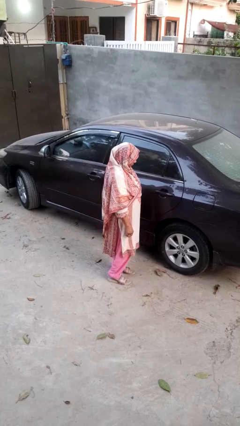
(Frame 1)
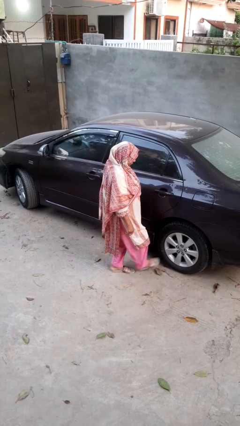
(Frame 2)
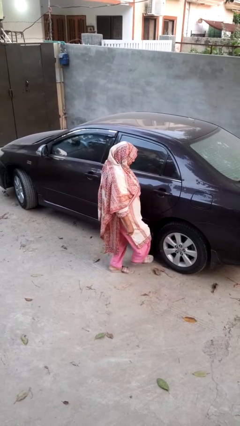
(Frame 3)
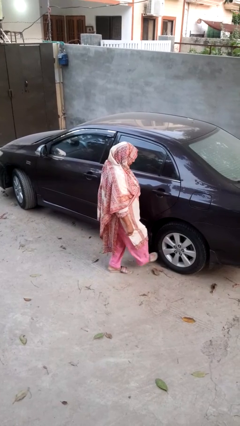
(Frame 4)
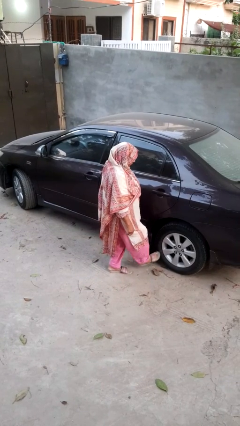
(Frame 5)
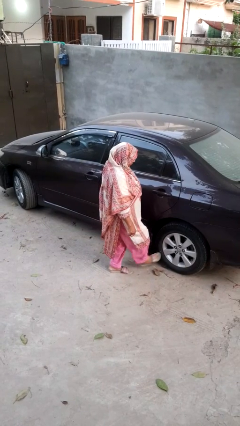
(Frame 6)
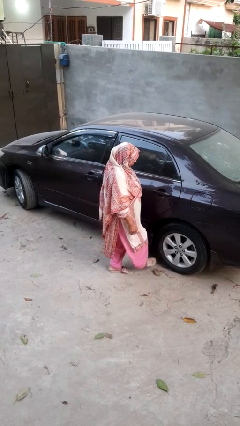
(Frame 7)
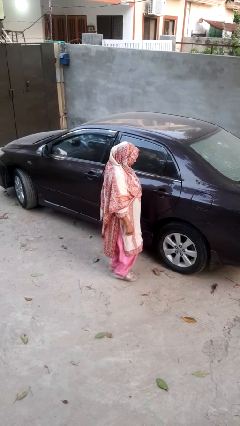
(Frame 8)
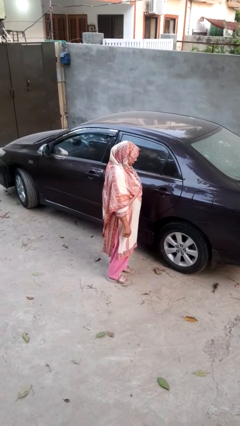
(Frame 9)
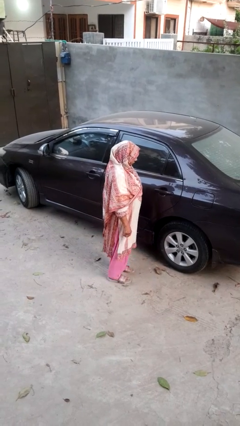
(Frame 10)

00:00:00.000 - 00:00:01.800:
person kicks car tires

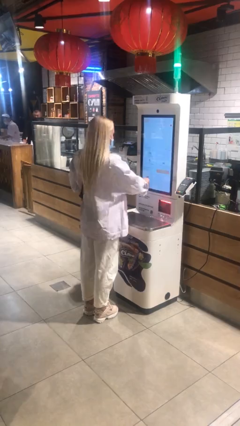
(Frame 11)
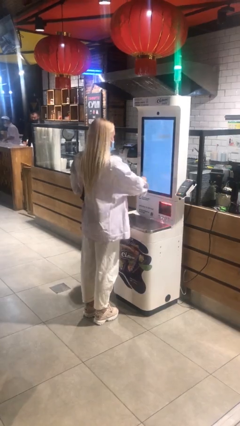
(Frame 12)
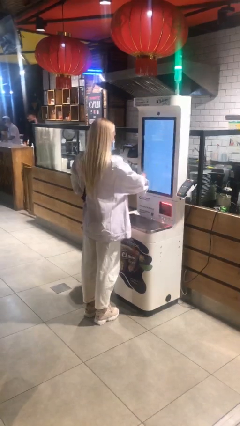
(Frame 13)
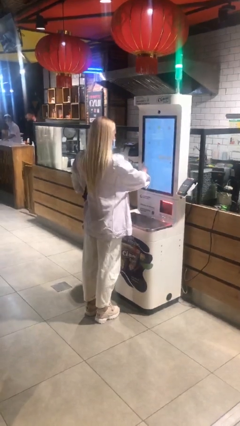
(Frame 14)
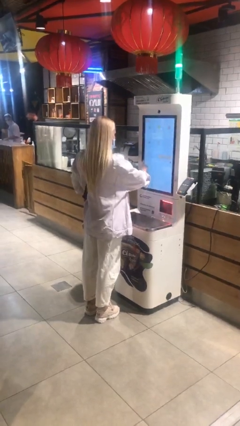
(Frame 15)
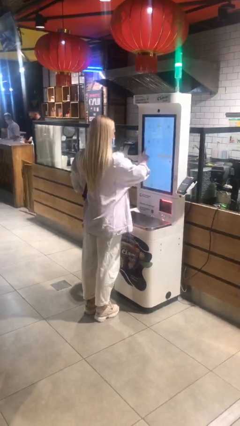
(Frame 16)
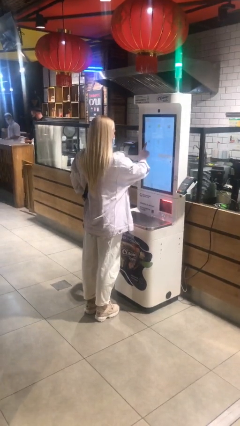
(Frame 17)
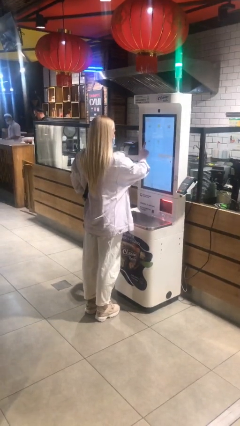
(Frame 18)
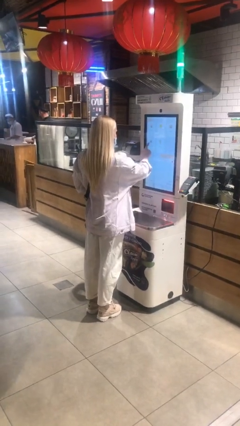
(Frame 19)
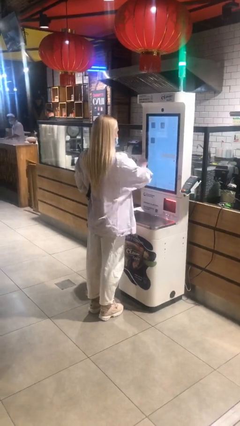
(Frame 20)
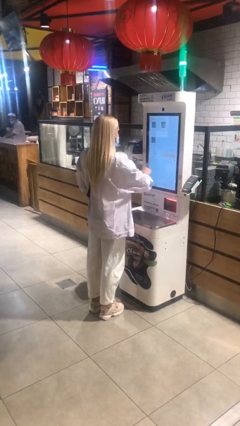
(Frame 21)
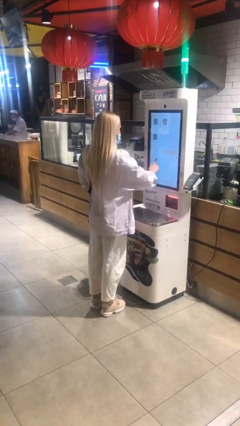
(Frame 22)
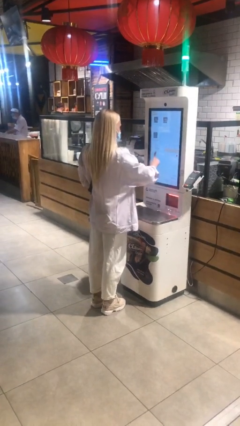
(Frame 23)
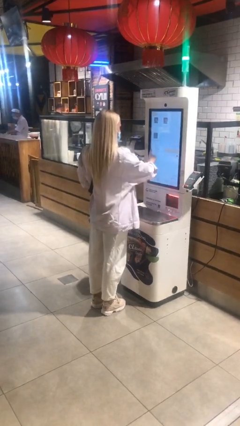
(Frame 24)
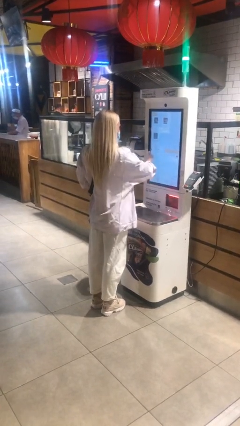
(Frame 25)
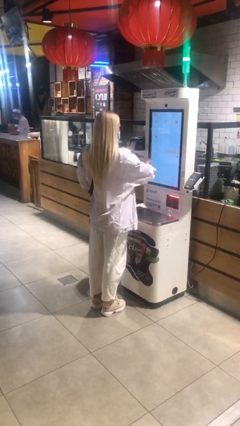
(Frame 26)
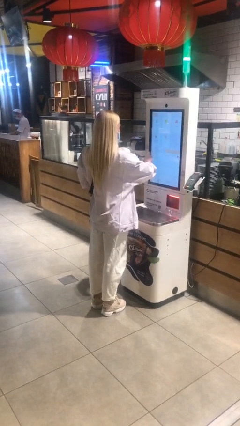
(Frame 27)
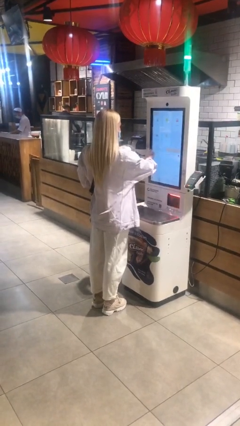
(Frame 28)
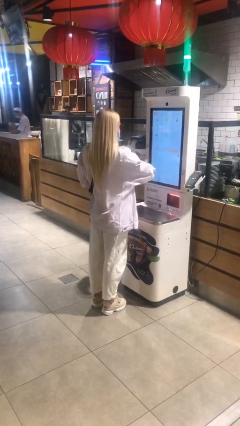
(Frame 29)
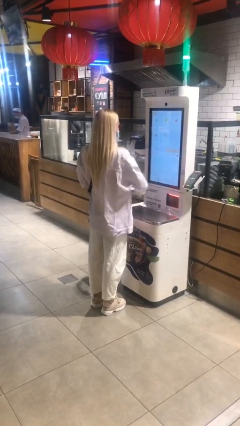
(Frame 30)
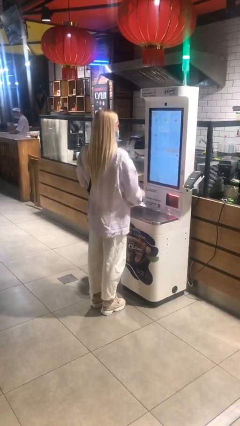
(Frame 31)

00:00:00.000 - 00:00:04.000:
person purchases from machine

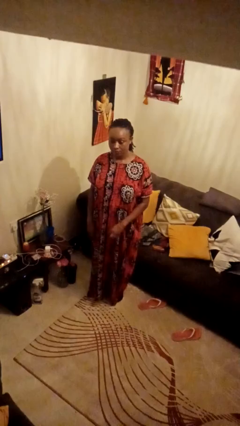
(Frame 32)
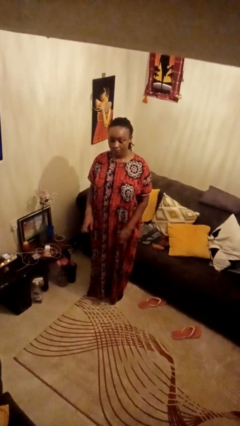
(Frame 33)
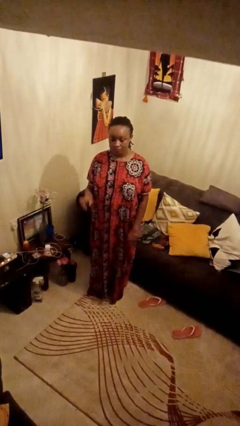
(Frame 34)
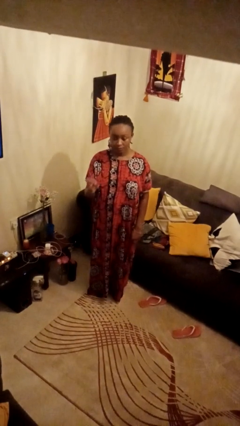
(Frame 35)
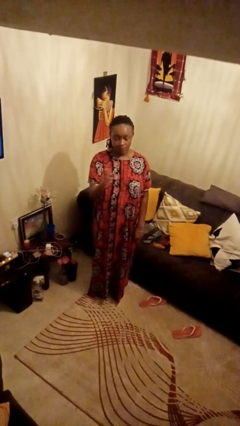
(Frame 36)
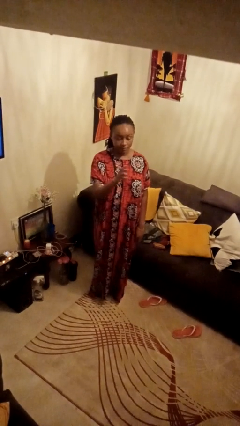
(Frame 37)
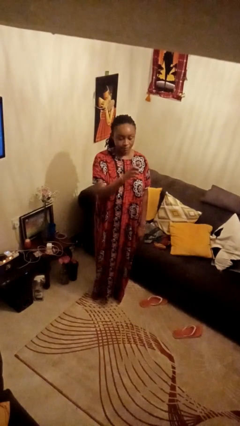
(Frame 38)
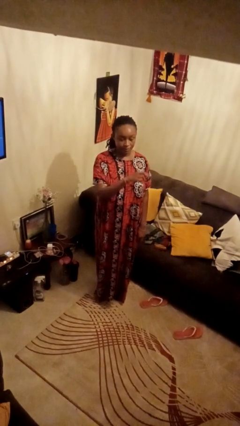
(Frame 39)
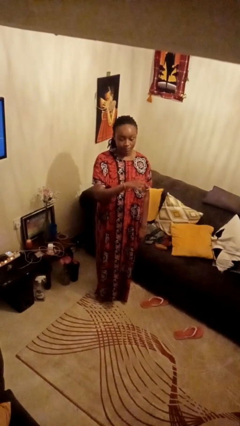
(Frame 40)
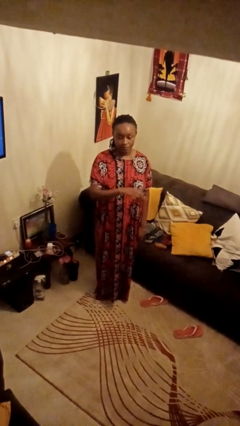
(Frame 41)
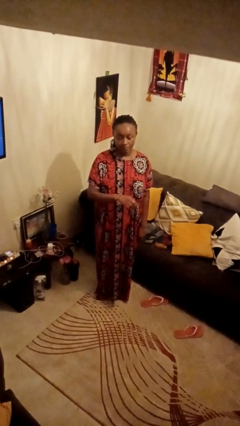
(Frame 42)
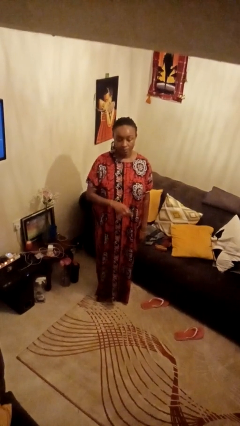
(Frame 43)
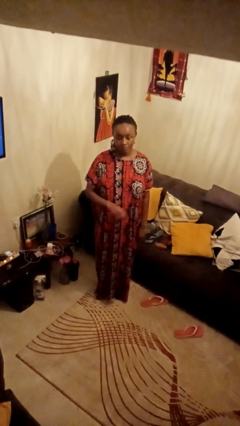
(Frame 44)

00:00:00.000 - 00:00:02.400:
person gestures swipe right

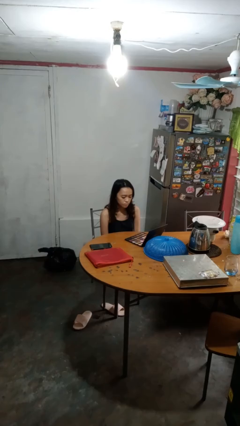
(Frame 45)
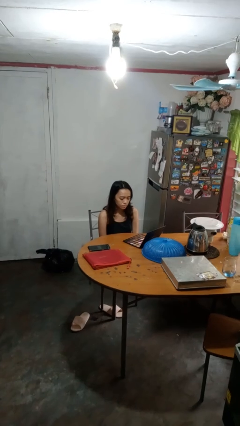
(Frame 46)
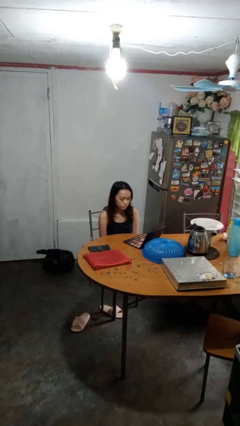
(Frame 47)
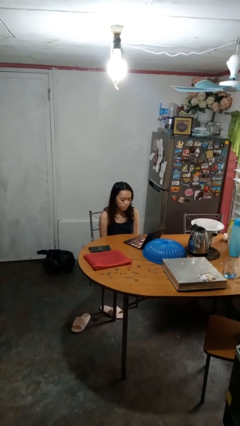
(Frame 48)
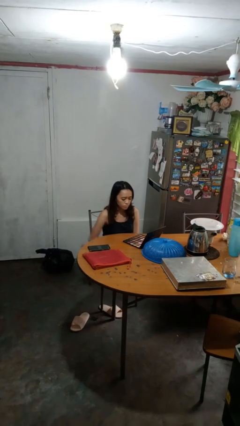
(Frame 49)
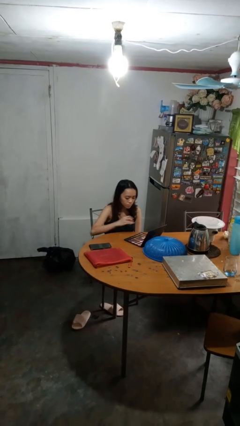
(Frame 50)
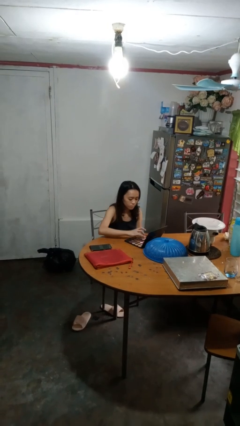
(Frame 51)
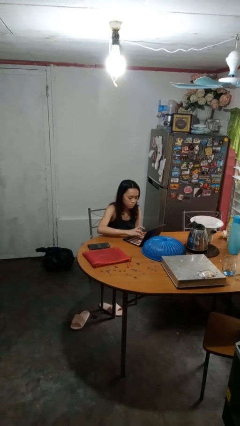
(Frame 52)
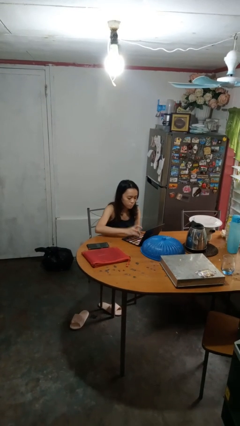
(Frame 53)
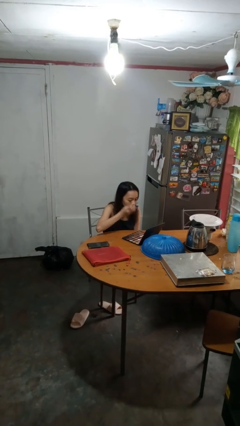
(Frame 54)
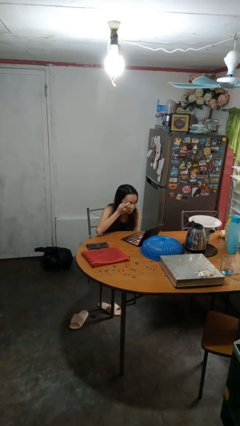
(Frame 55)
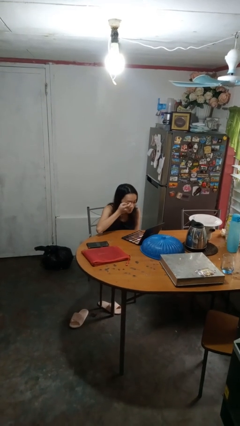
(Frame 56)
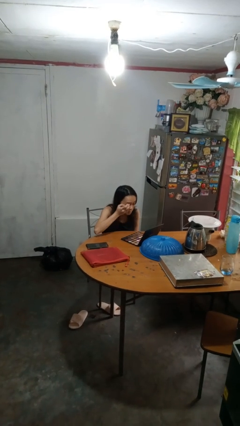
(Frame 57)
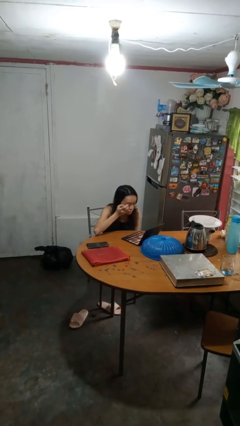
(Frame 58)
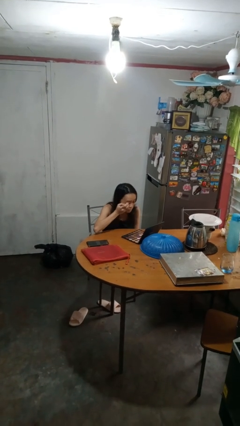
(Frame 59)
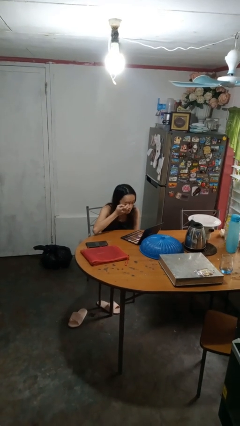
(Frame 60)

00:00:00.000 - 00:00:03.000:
person applies eye makeup

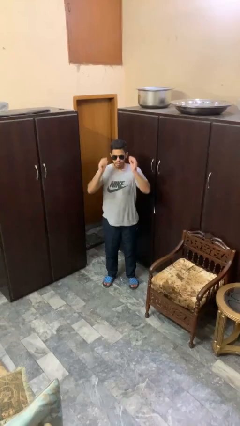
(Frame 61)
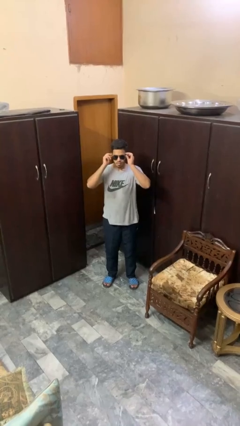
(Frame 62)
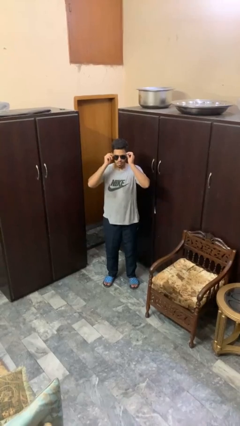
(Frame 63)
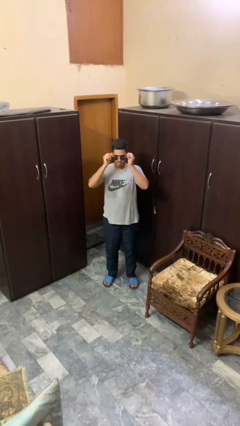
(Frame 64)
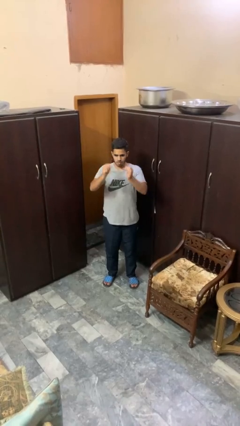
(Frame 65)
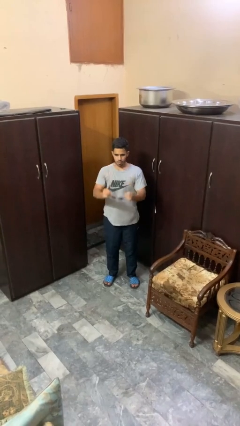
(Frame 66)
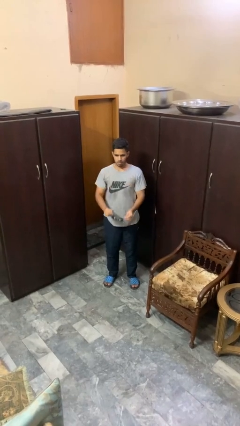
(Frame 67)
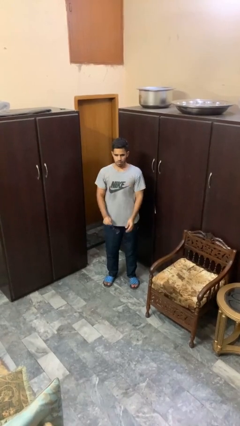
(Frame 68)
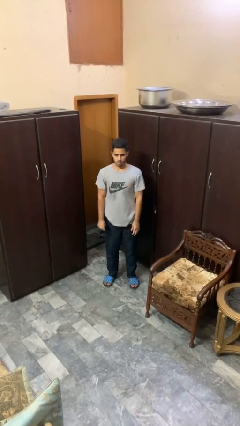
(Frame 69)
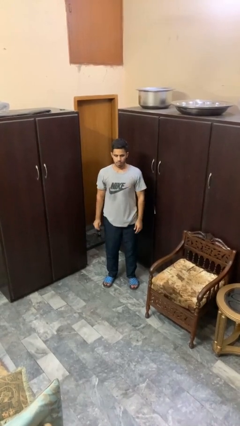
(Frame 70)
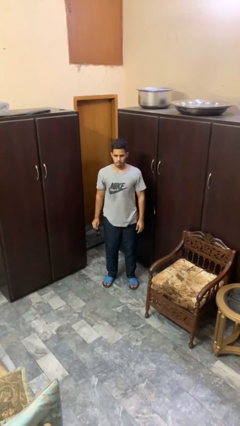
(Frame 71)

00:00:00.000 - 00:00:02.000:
person takes off sunglasses

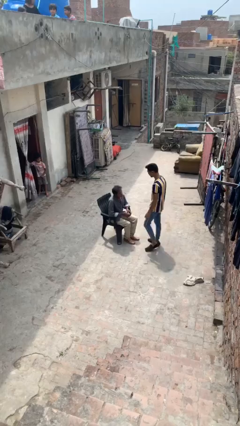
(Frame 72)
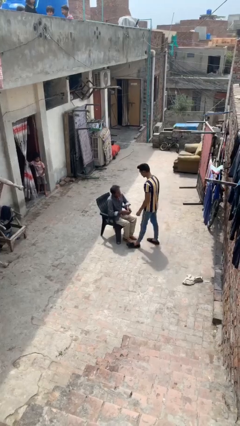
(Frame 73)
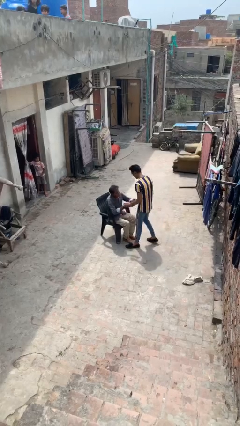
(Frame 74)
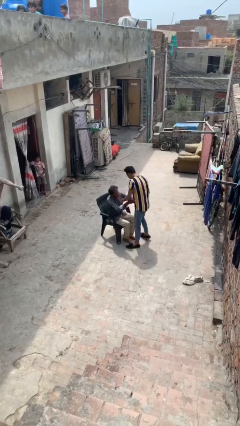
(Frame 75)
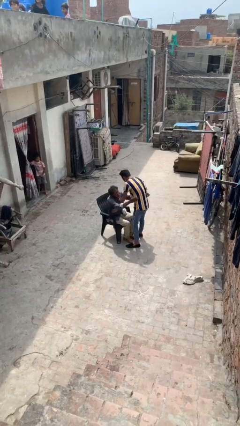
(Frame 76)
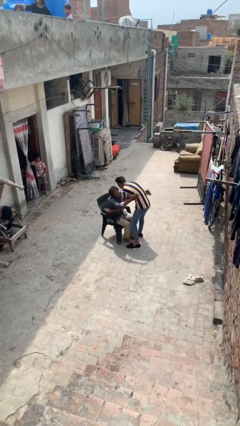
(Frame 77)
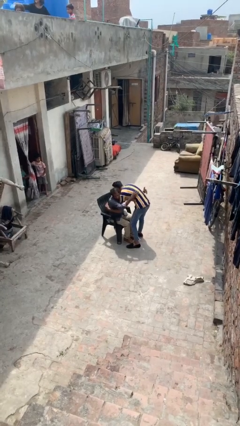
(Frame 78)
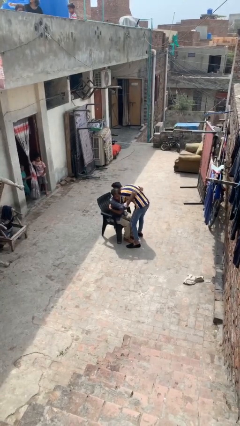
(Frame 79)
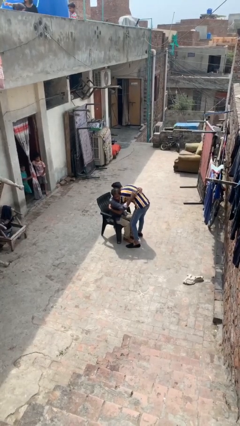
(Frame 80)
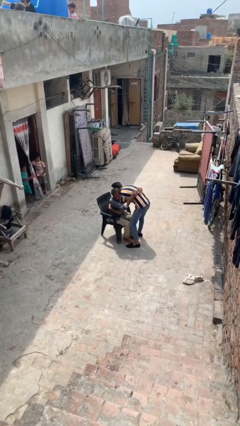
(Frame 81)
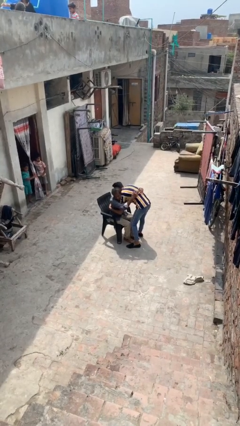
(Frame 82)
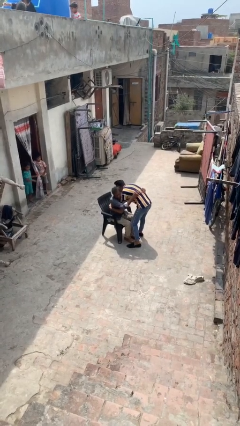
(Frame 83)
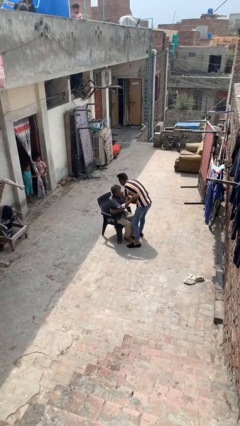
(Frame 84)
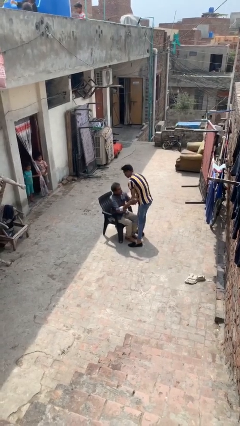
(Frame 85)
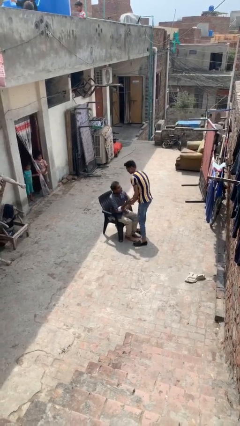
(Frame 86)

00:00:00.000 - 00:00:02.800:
person embraces person

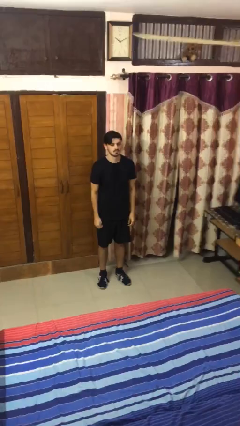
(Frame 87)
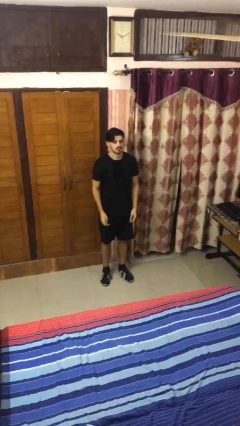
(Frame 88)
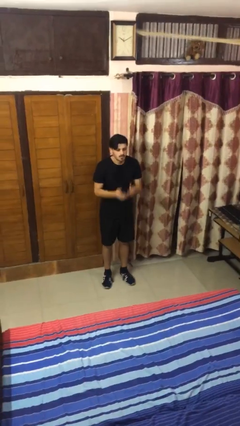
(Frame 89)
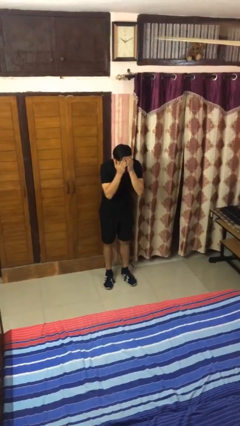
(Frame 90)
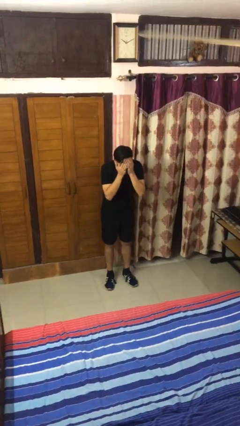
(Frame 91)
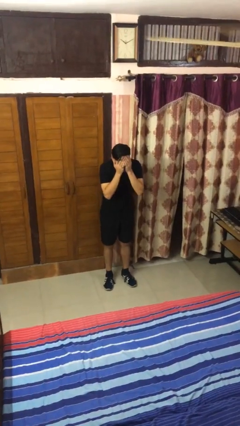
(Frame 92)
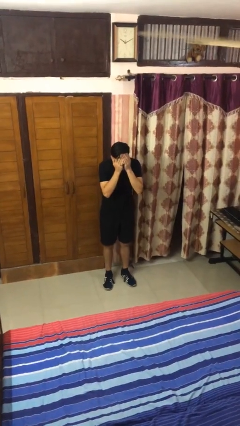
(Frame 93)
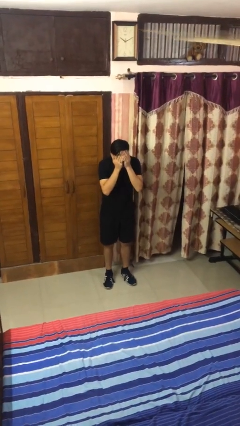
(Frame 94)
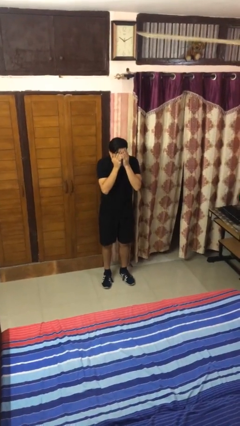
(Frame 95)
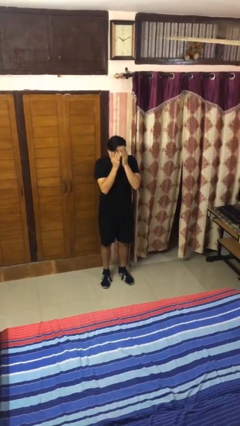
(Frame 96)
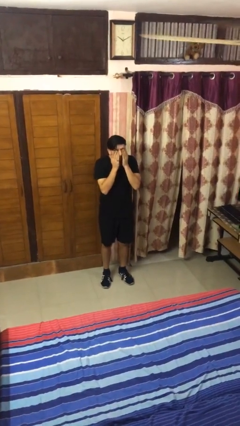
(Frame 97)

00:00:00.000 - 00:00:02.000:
person covers face with hands
